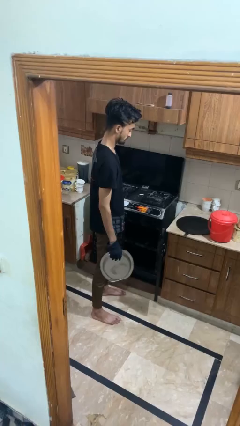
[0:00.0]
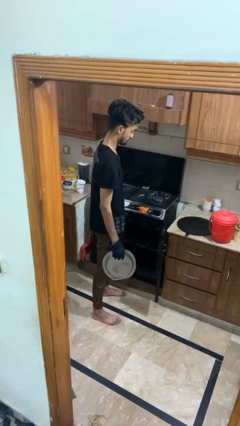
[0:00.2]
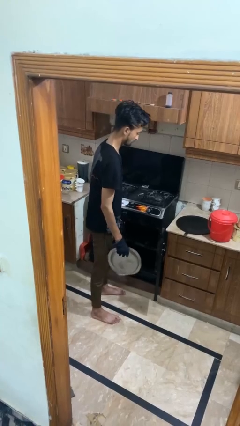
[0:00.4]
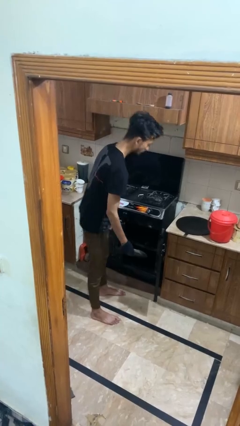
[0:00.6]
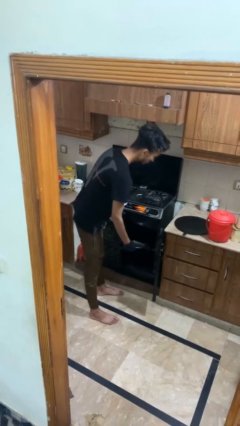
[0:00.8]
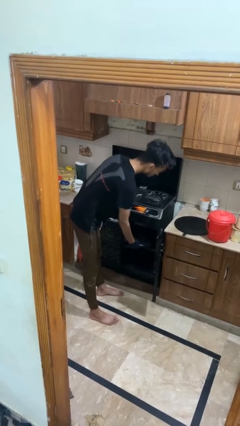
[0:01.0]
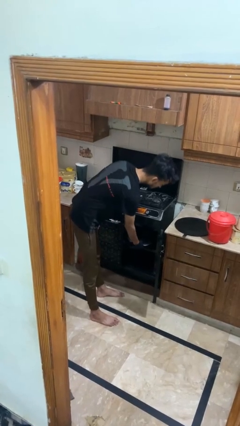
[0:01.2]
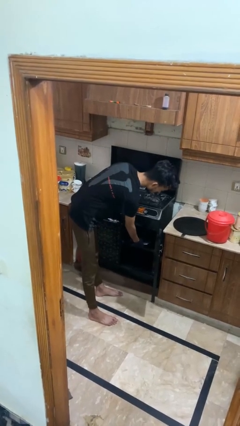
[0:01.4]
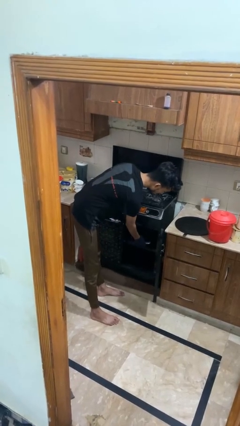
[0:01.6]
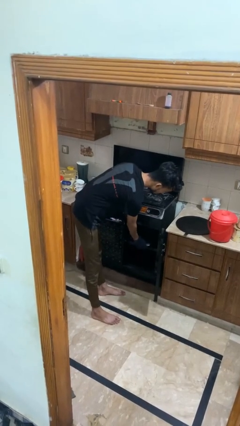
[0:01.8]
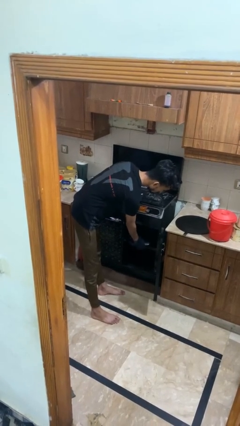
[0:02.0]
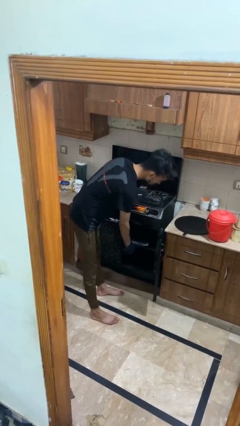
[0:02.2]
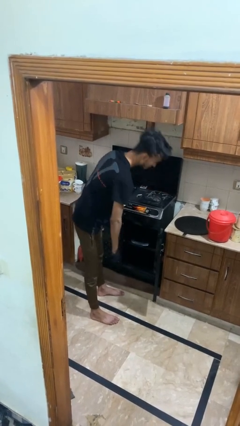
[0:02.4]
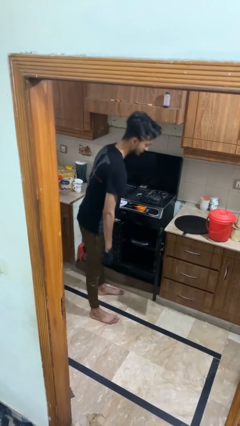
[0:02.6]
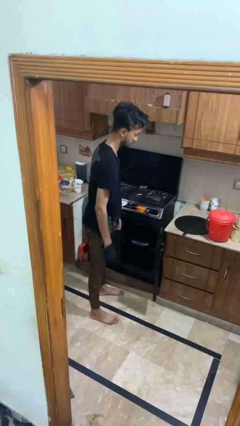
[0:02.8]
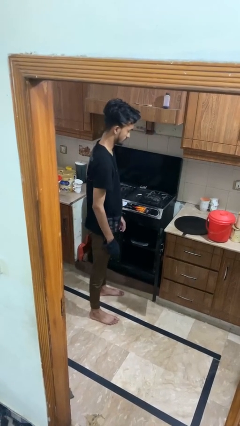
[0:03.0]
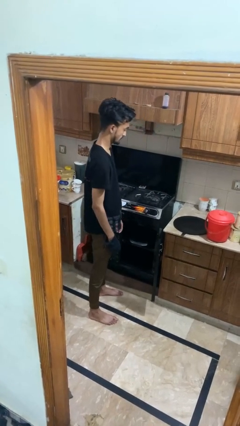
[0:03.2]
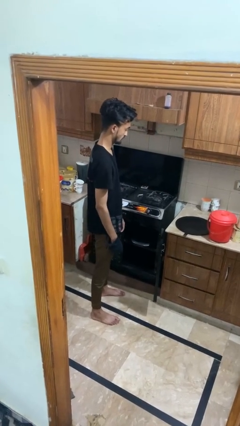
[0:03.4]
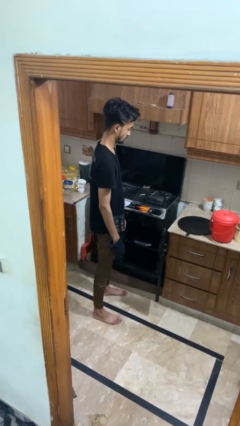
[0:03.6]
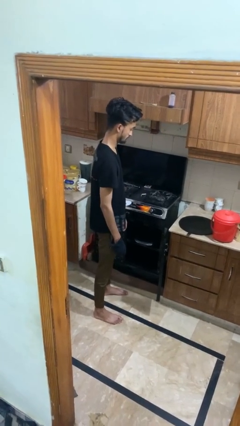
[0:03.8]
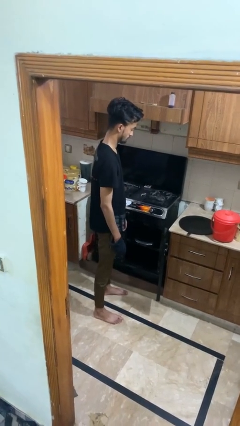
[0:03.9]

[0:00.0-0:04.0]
person puts object into oven

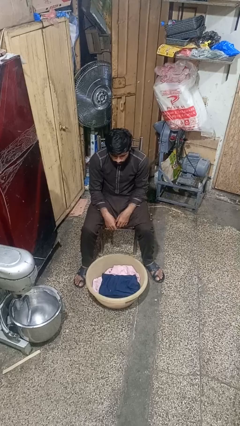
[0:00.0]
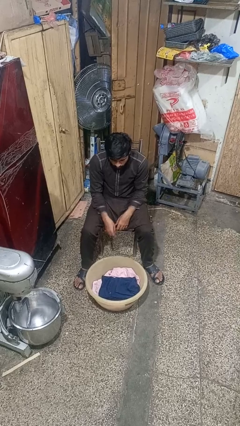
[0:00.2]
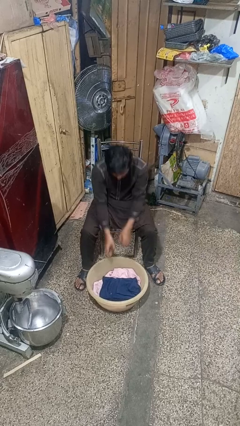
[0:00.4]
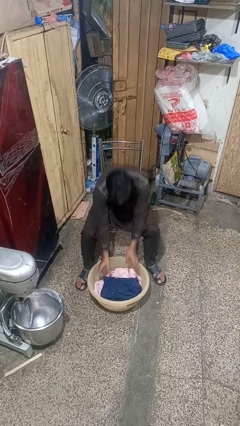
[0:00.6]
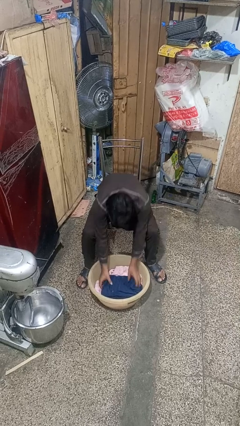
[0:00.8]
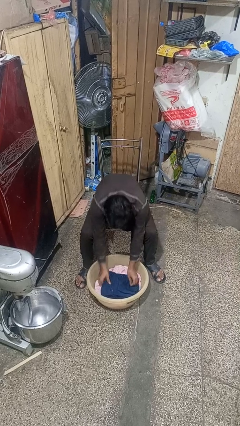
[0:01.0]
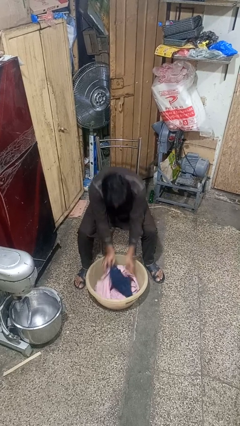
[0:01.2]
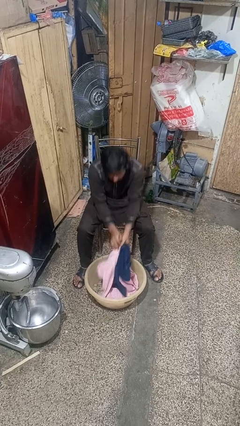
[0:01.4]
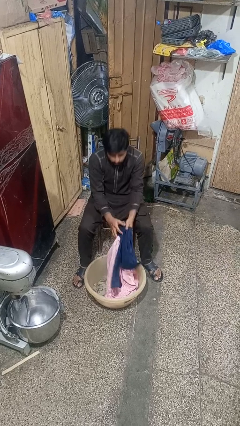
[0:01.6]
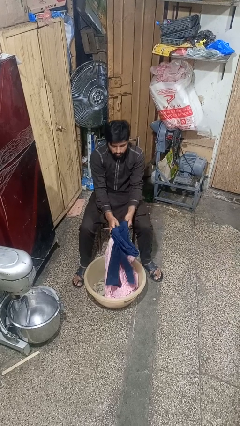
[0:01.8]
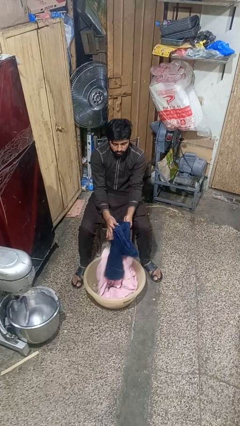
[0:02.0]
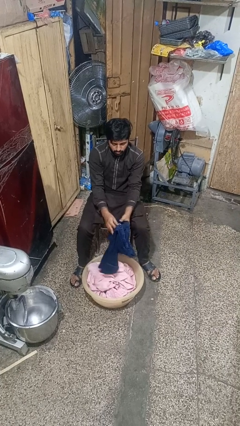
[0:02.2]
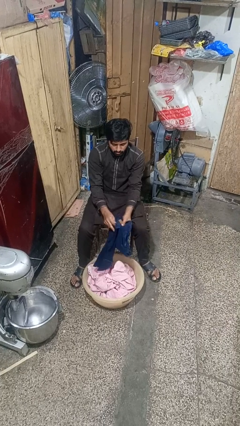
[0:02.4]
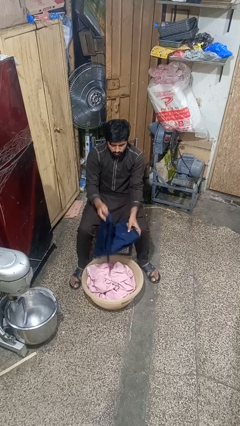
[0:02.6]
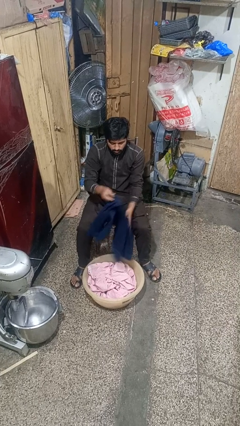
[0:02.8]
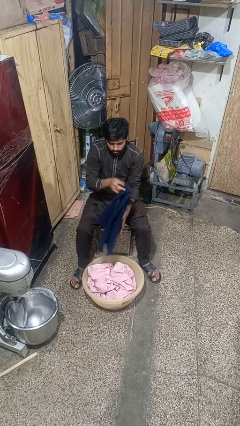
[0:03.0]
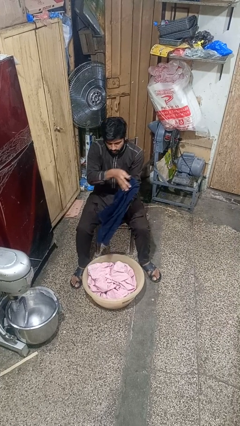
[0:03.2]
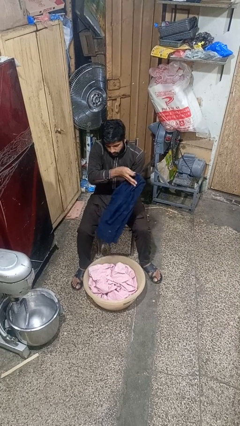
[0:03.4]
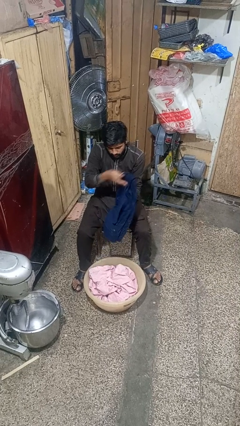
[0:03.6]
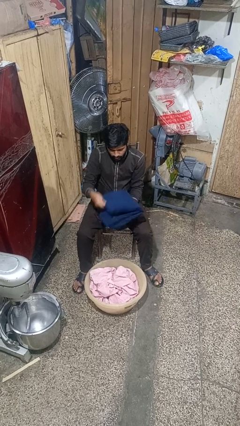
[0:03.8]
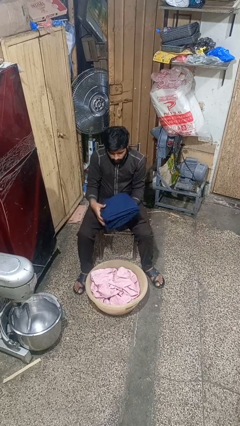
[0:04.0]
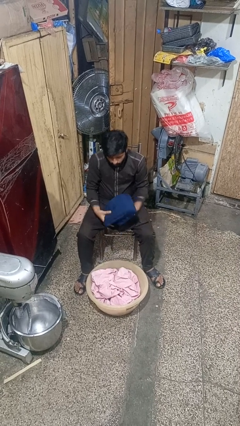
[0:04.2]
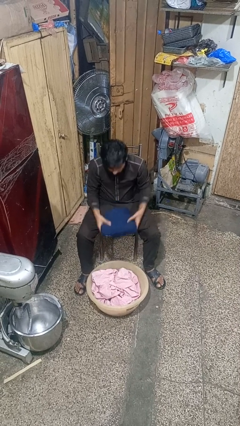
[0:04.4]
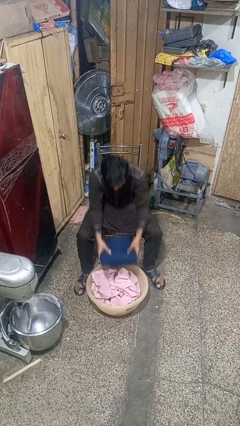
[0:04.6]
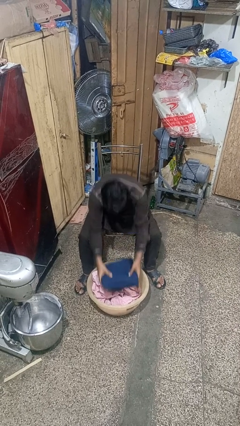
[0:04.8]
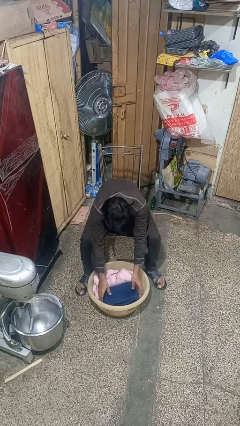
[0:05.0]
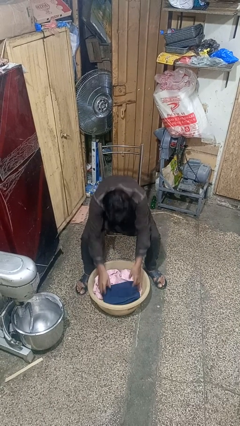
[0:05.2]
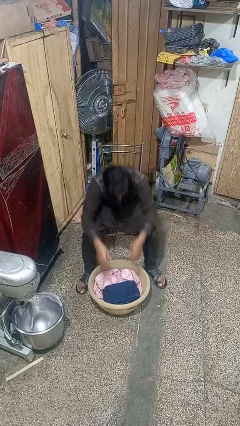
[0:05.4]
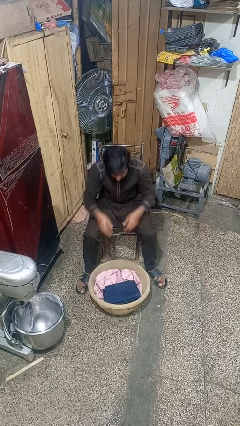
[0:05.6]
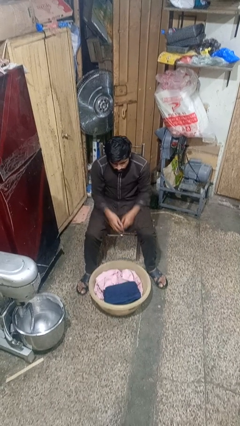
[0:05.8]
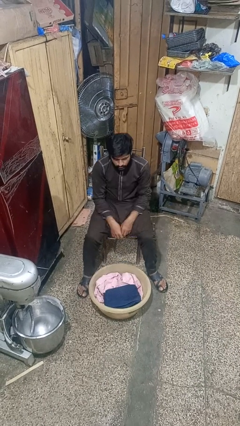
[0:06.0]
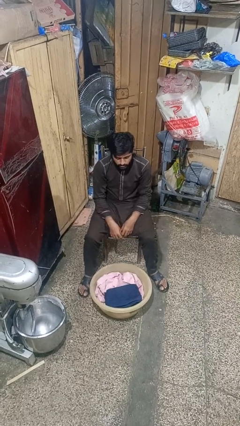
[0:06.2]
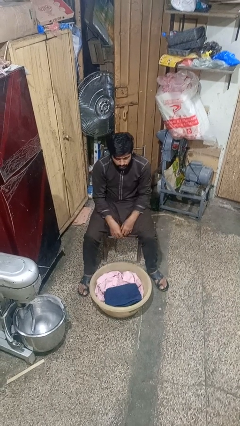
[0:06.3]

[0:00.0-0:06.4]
person folds pants

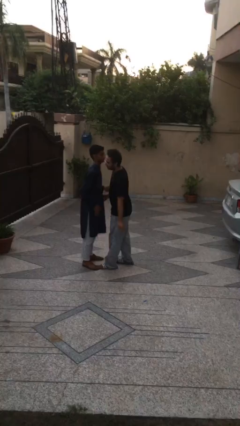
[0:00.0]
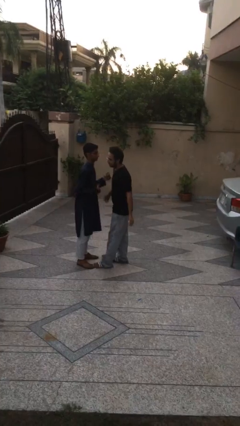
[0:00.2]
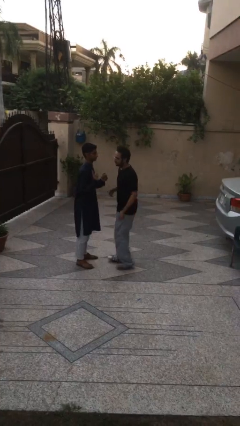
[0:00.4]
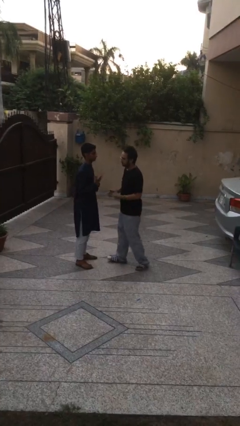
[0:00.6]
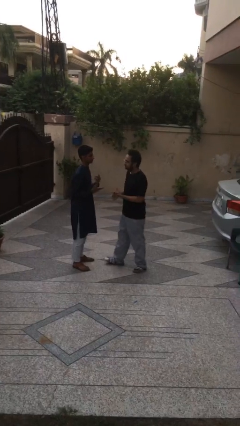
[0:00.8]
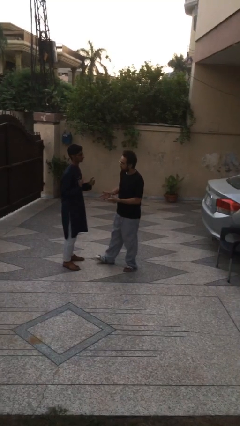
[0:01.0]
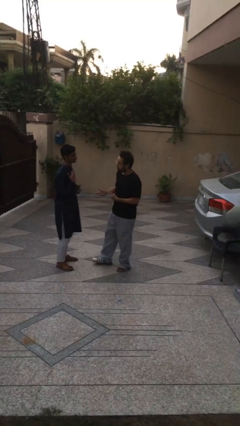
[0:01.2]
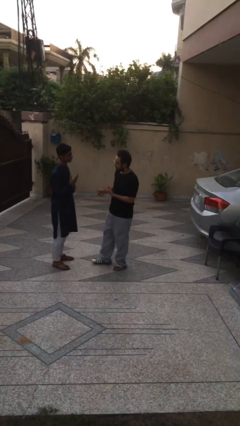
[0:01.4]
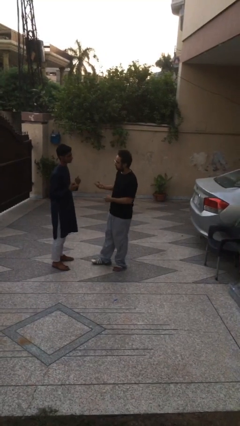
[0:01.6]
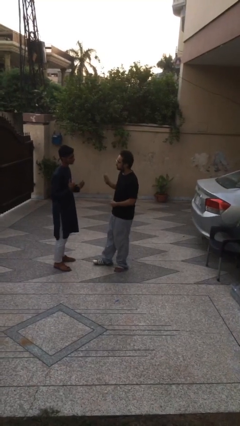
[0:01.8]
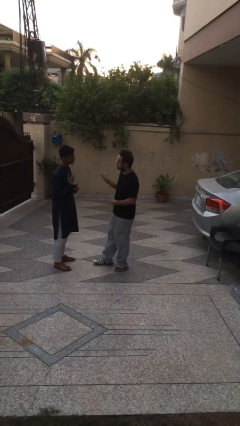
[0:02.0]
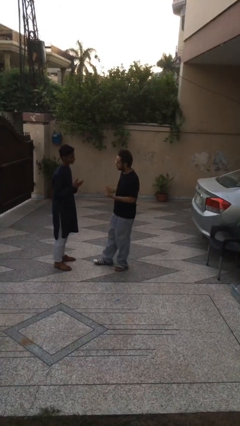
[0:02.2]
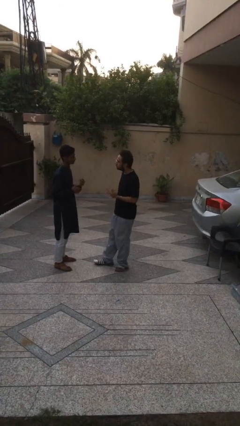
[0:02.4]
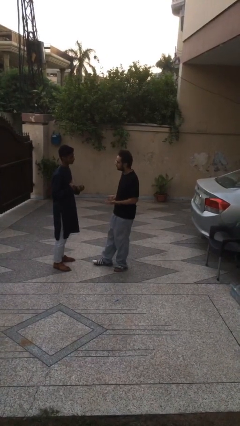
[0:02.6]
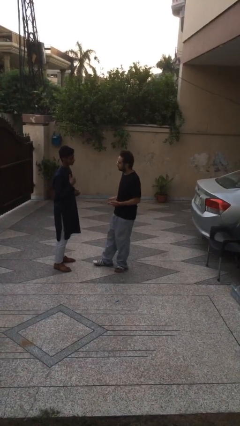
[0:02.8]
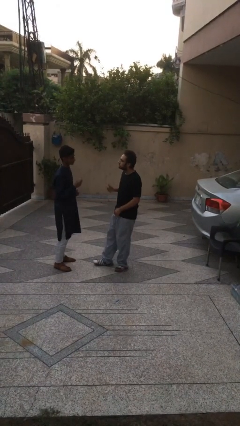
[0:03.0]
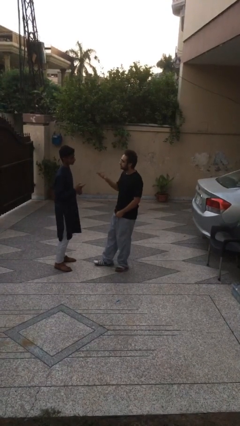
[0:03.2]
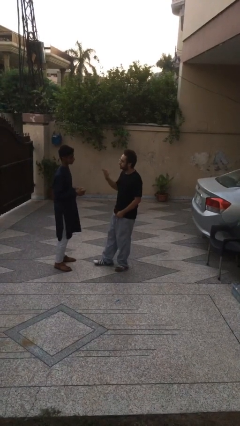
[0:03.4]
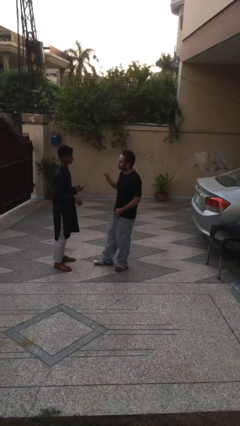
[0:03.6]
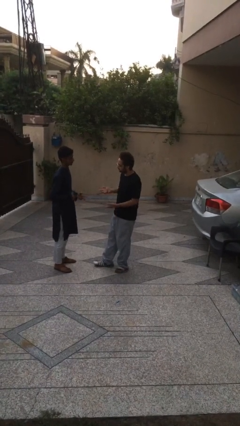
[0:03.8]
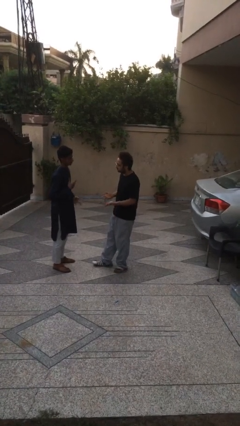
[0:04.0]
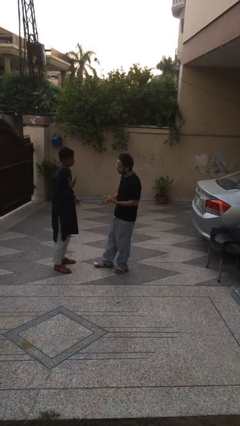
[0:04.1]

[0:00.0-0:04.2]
person talks to person

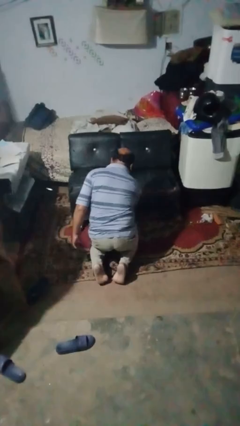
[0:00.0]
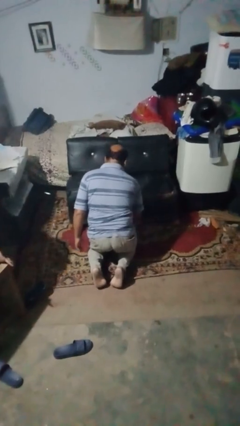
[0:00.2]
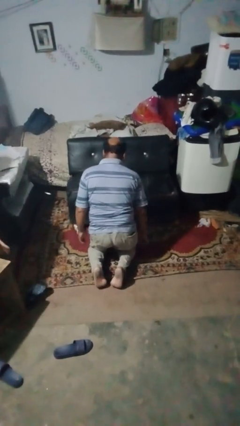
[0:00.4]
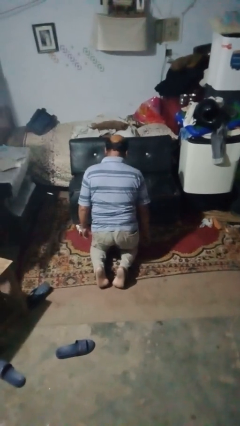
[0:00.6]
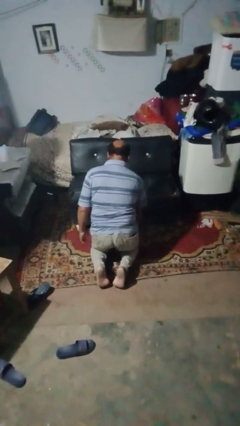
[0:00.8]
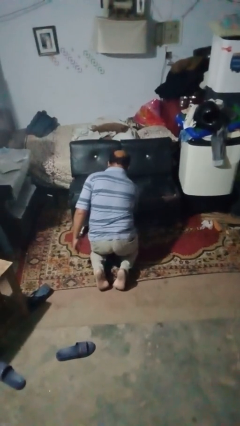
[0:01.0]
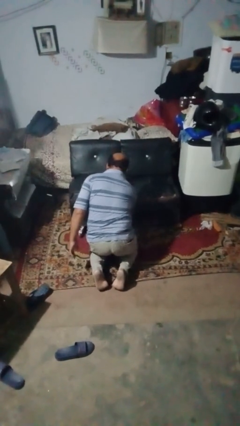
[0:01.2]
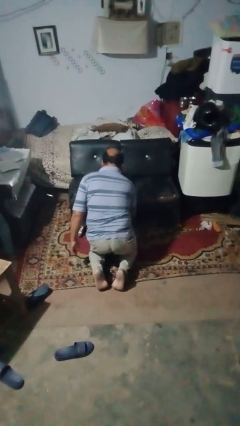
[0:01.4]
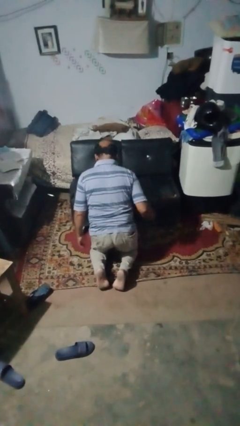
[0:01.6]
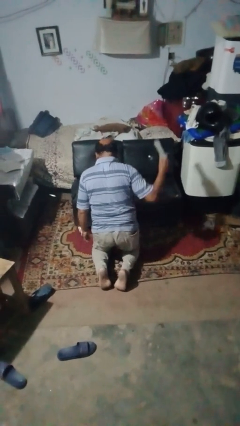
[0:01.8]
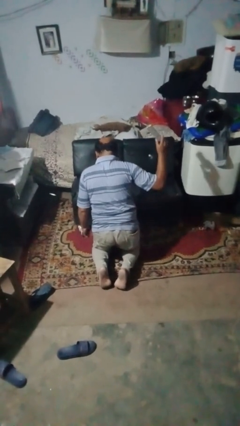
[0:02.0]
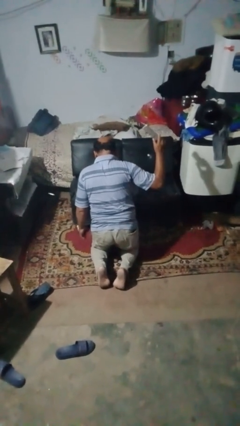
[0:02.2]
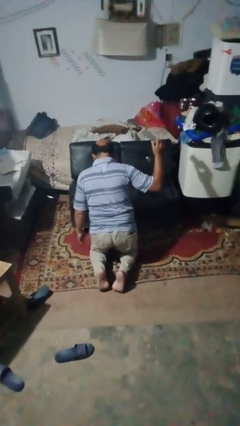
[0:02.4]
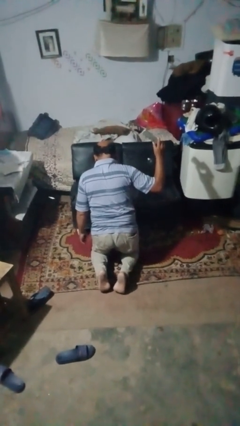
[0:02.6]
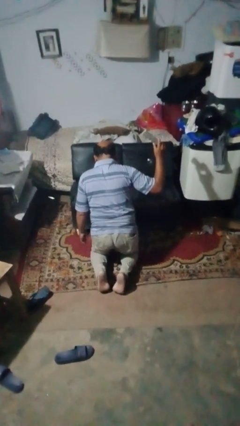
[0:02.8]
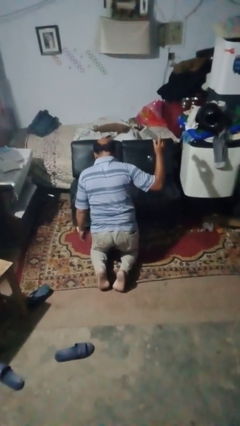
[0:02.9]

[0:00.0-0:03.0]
person searches under couch

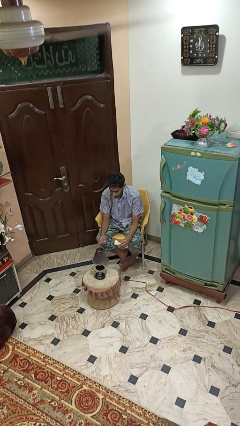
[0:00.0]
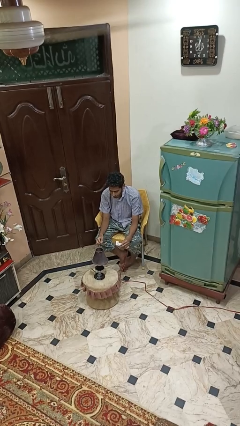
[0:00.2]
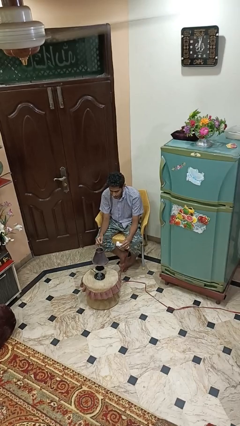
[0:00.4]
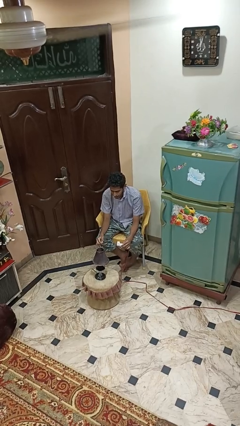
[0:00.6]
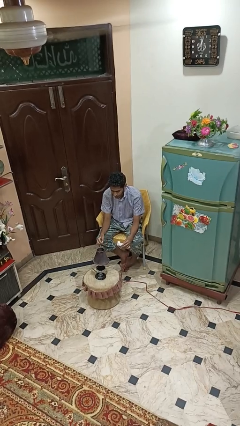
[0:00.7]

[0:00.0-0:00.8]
person turns off lamp
